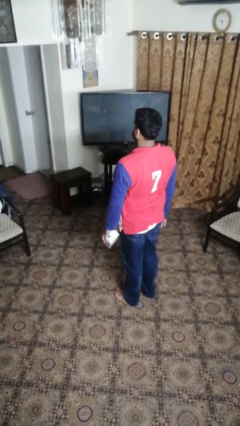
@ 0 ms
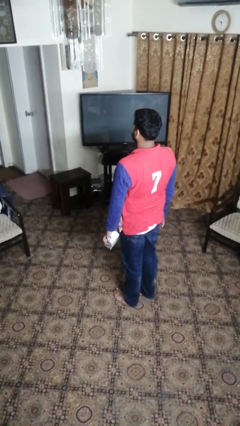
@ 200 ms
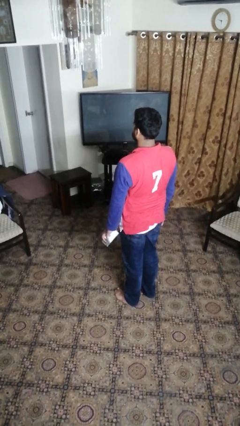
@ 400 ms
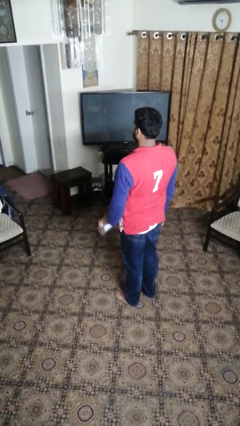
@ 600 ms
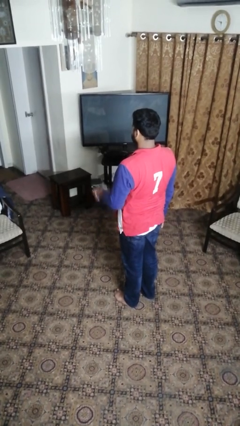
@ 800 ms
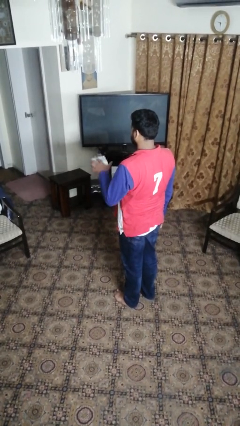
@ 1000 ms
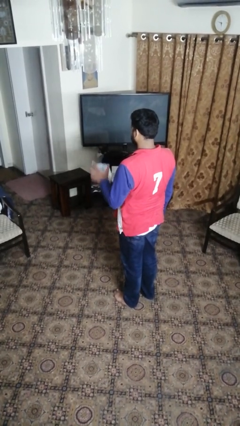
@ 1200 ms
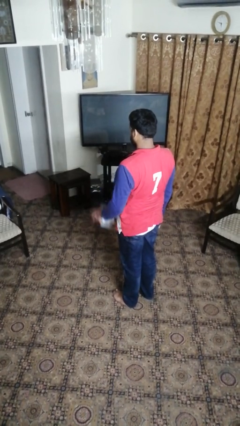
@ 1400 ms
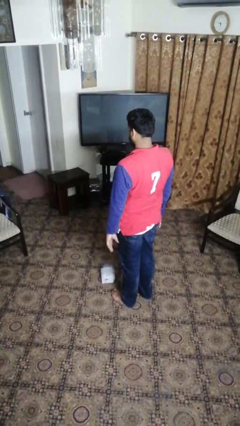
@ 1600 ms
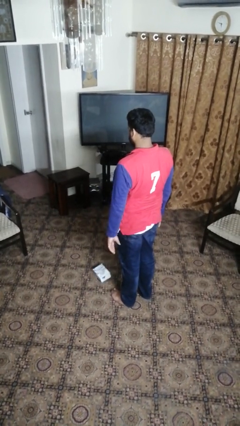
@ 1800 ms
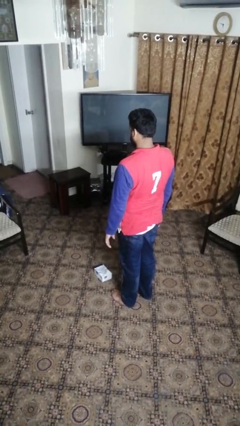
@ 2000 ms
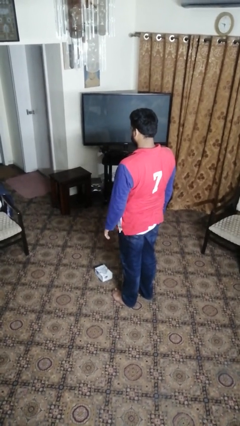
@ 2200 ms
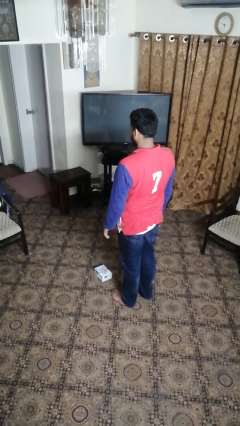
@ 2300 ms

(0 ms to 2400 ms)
person throws object into air

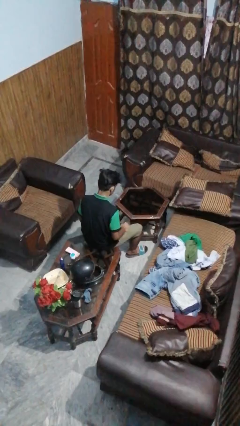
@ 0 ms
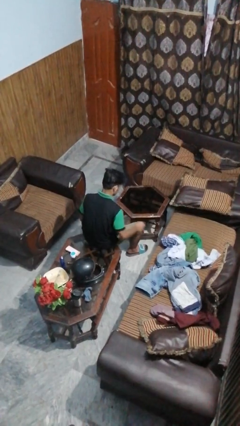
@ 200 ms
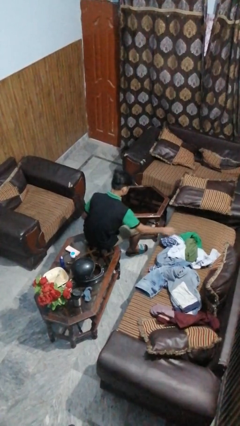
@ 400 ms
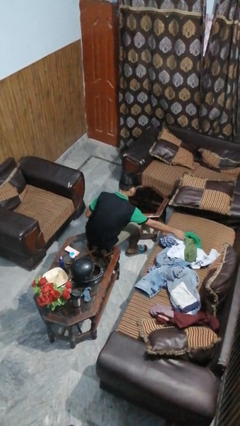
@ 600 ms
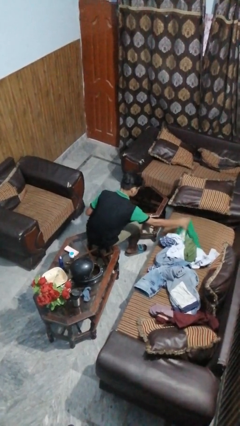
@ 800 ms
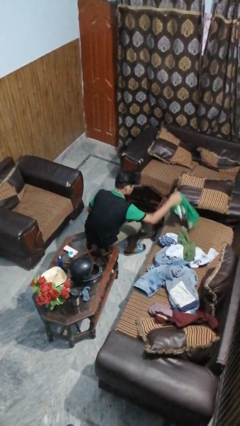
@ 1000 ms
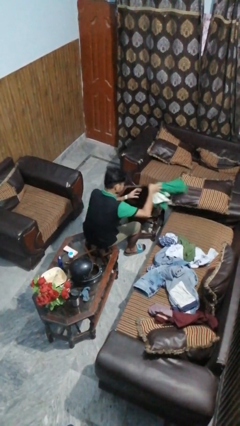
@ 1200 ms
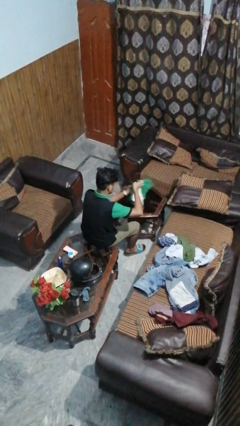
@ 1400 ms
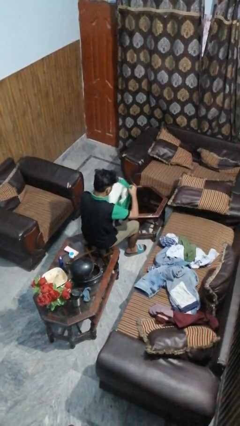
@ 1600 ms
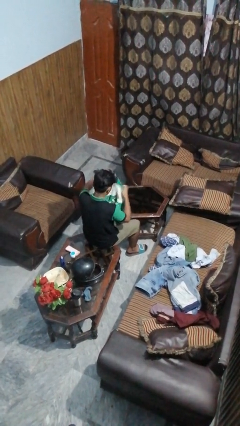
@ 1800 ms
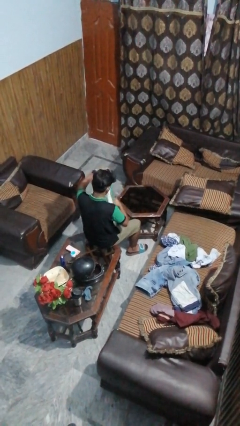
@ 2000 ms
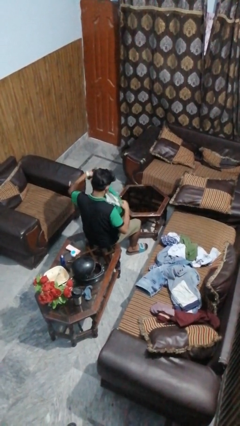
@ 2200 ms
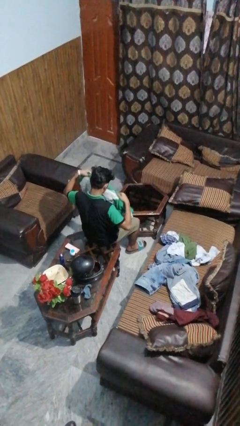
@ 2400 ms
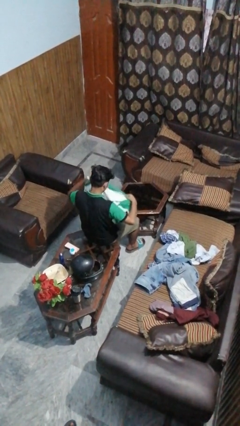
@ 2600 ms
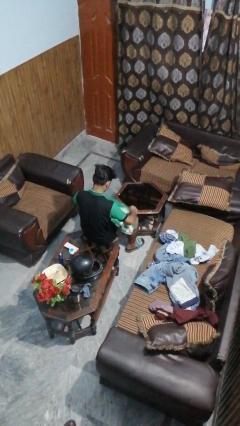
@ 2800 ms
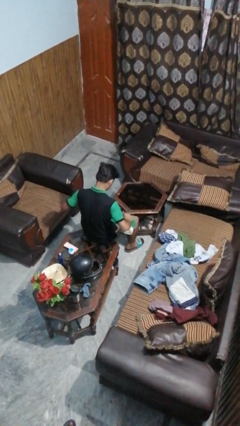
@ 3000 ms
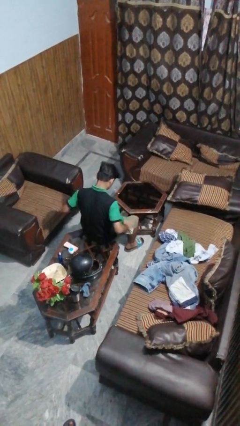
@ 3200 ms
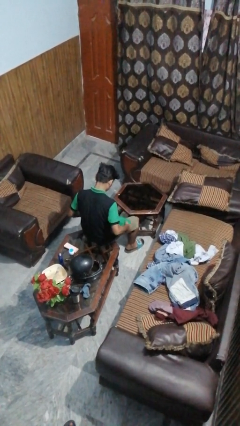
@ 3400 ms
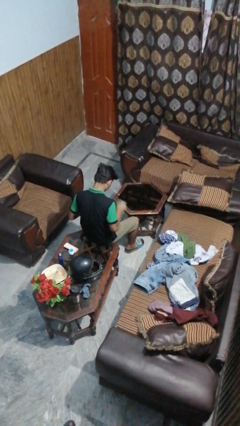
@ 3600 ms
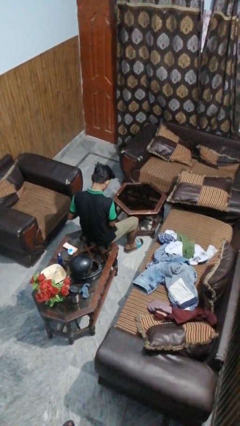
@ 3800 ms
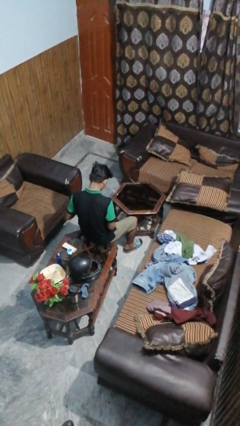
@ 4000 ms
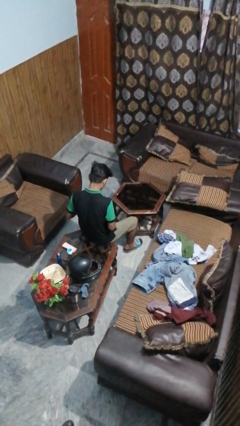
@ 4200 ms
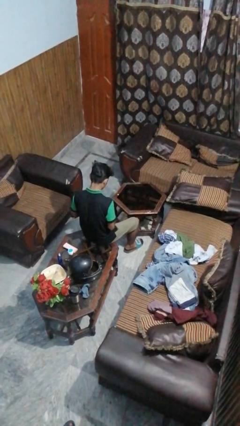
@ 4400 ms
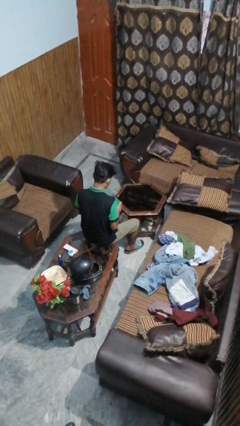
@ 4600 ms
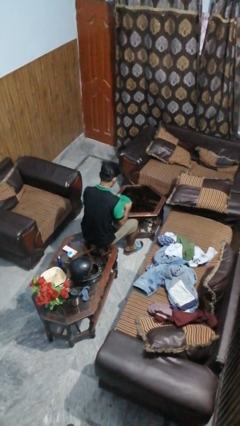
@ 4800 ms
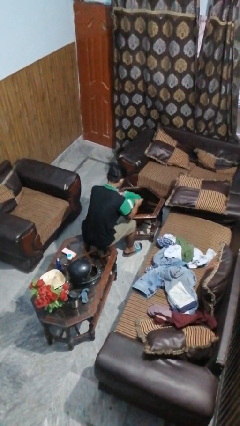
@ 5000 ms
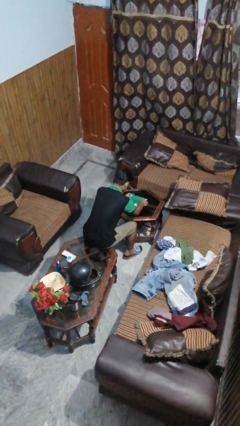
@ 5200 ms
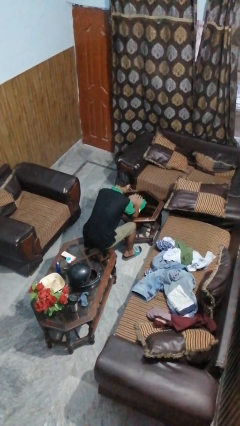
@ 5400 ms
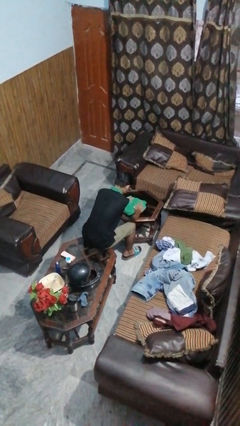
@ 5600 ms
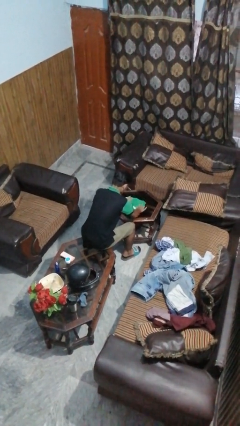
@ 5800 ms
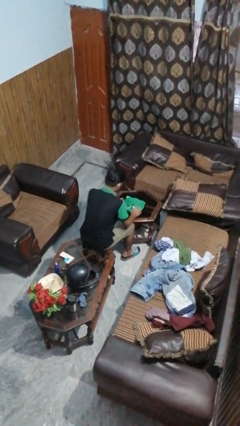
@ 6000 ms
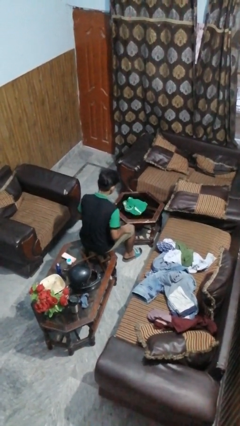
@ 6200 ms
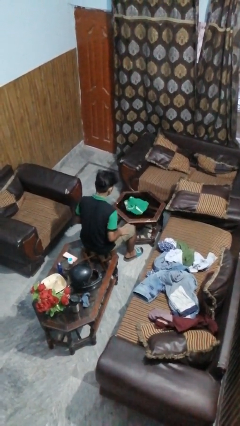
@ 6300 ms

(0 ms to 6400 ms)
person folds shirt

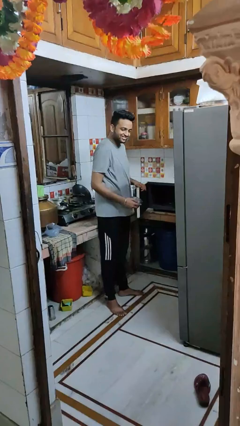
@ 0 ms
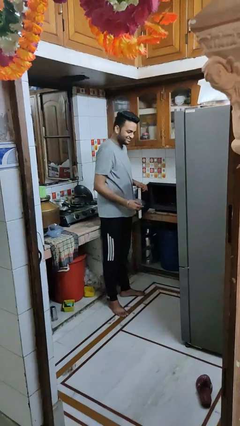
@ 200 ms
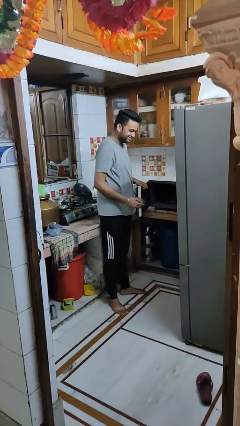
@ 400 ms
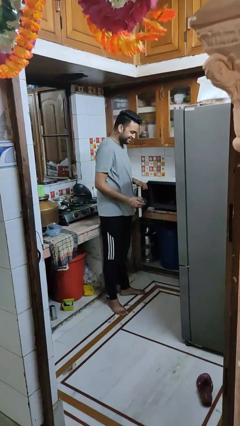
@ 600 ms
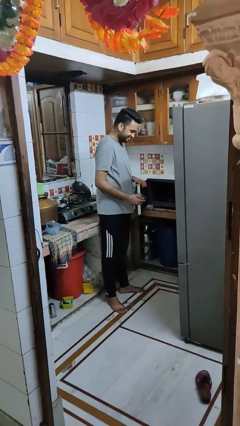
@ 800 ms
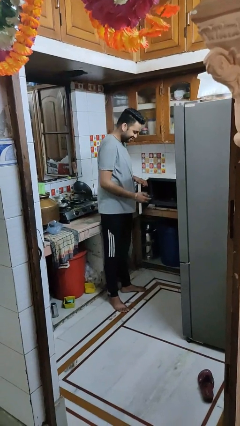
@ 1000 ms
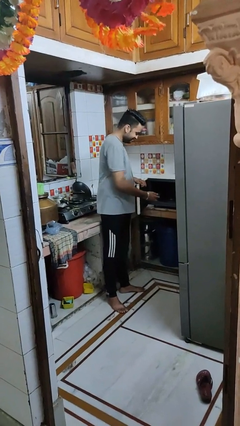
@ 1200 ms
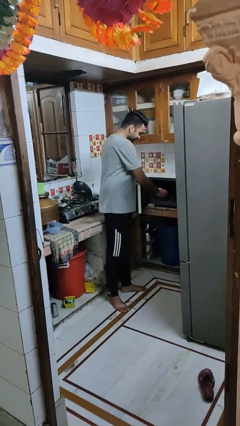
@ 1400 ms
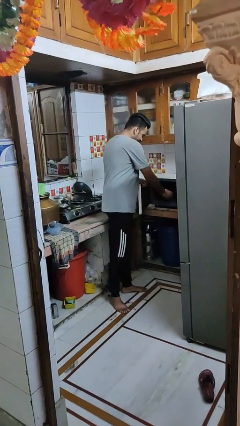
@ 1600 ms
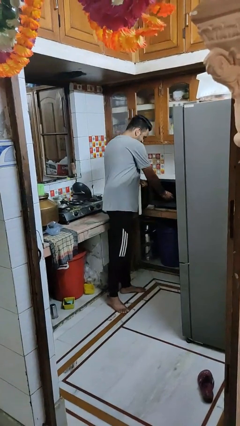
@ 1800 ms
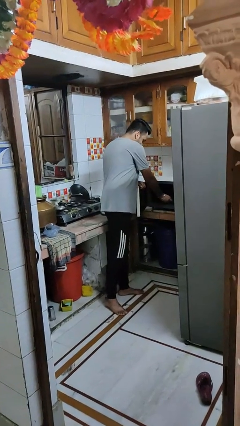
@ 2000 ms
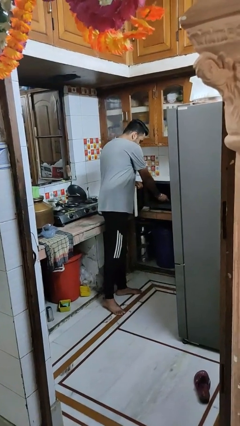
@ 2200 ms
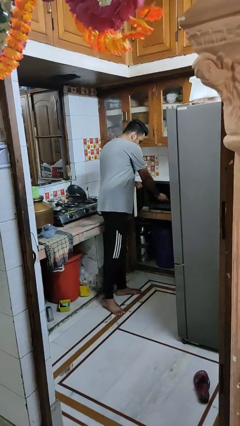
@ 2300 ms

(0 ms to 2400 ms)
person puts object into microwave

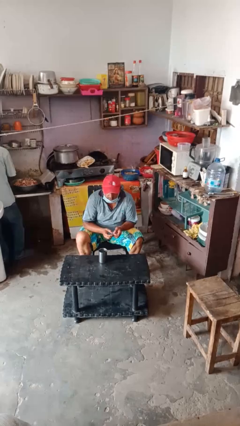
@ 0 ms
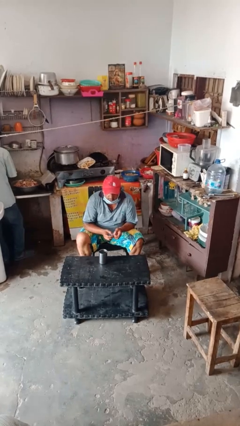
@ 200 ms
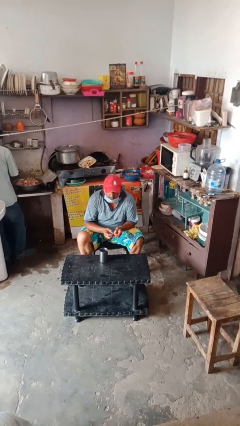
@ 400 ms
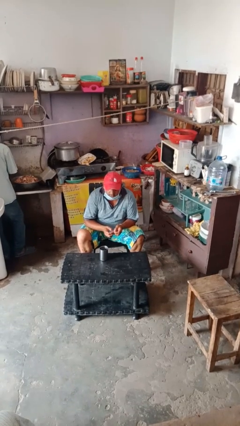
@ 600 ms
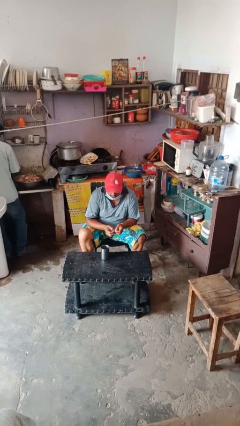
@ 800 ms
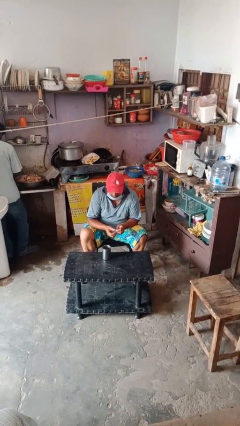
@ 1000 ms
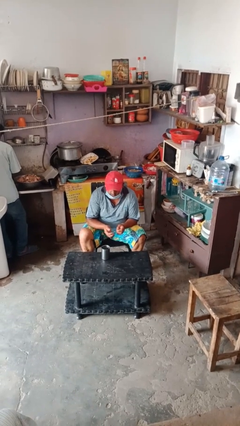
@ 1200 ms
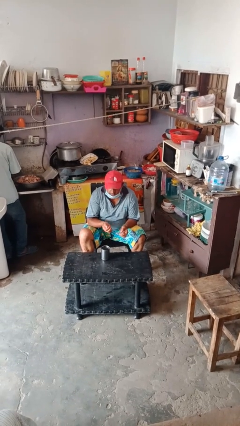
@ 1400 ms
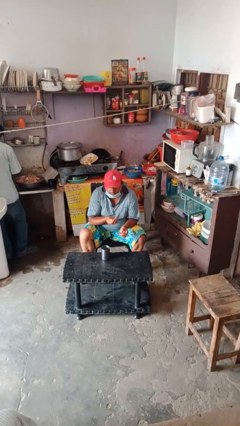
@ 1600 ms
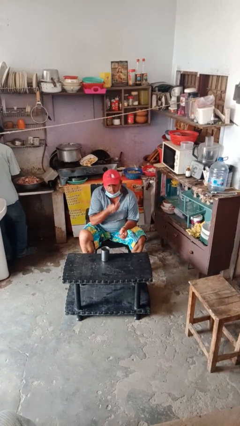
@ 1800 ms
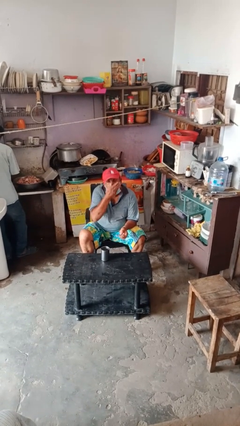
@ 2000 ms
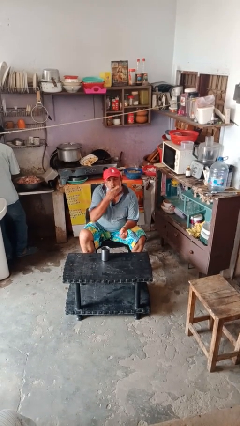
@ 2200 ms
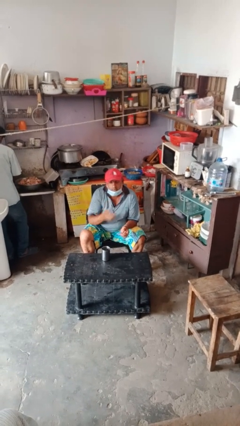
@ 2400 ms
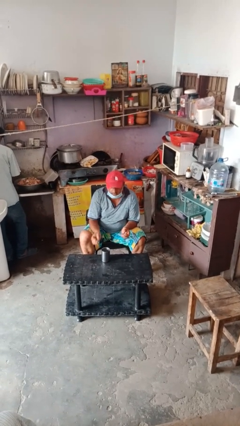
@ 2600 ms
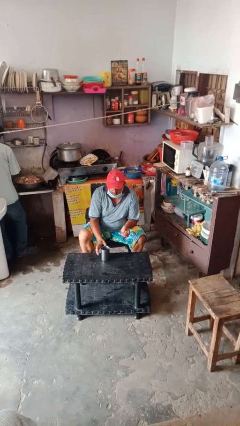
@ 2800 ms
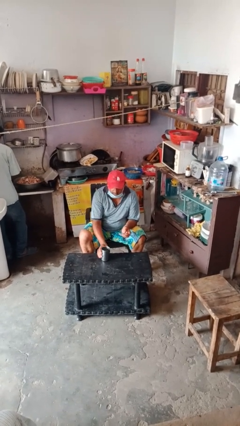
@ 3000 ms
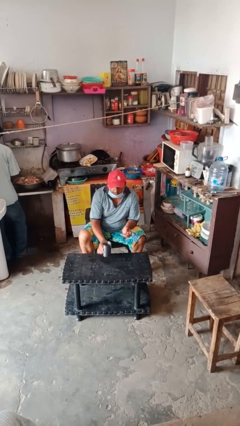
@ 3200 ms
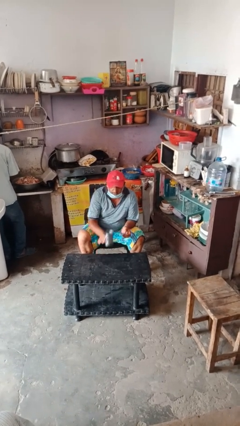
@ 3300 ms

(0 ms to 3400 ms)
person takes medicine pills

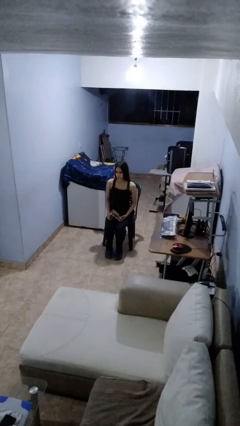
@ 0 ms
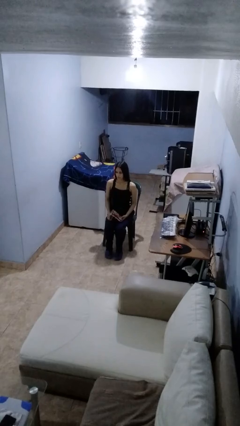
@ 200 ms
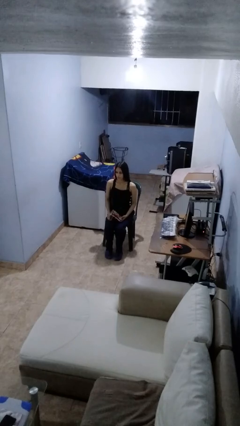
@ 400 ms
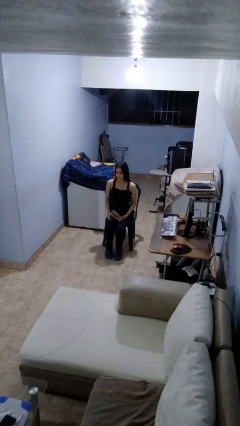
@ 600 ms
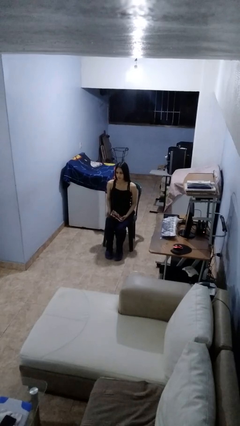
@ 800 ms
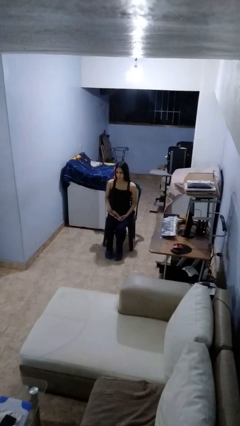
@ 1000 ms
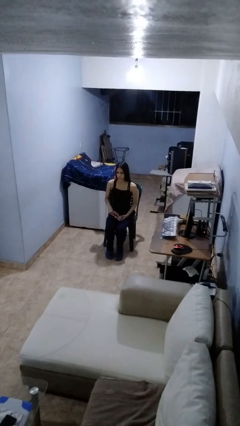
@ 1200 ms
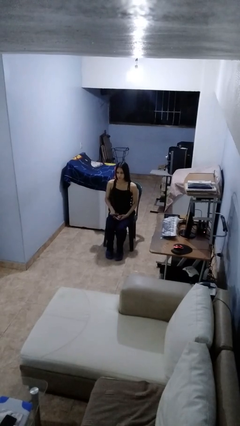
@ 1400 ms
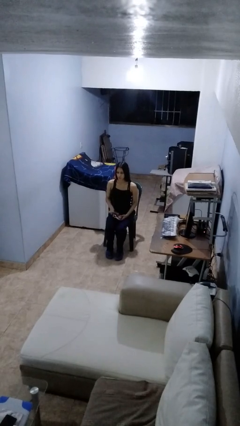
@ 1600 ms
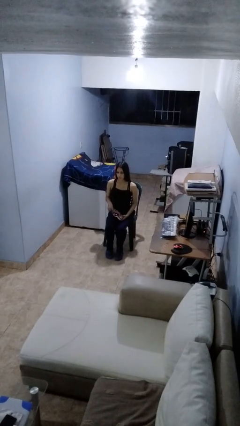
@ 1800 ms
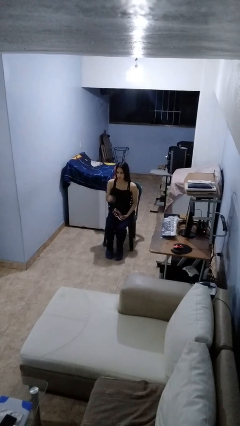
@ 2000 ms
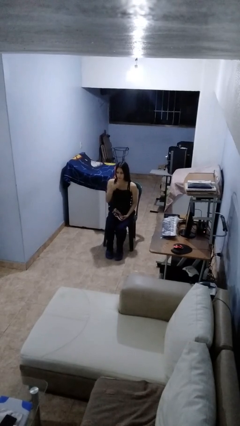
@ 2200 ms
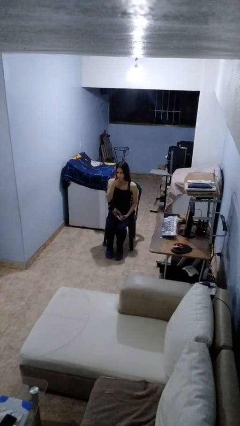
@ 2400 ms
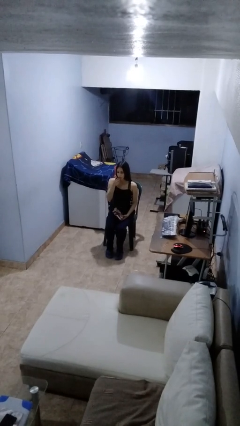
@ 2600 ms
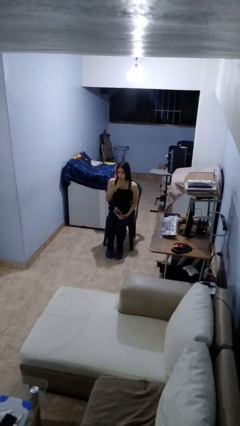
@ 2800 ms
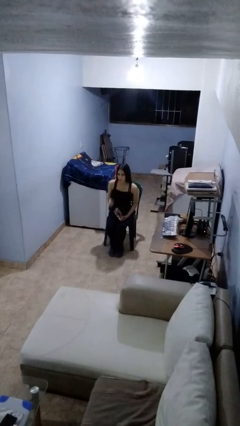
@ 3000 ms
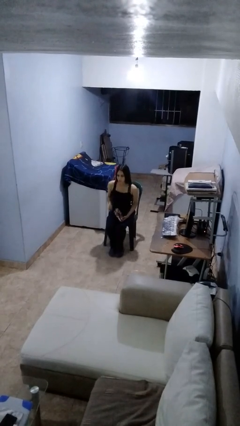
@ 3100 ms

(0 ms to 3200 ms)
person eats snack from bag
